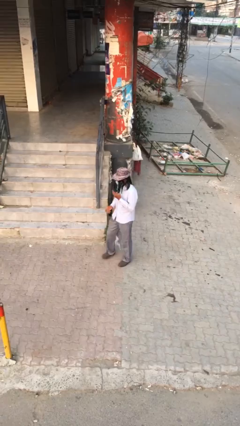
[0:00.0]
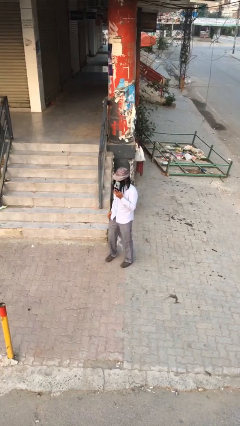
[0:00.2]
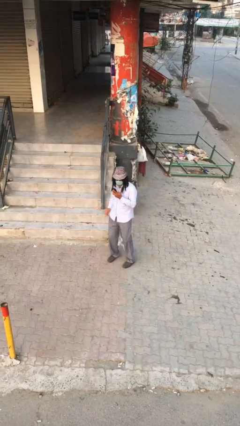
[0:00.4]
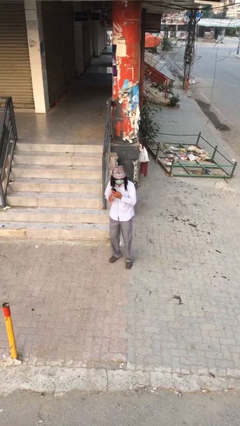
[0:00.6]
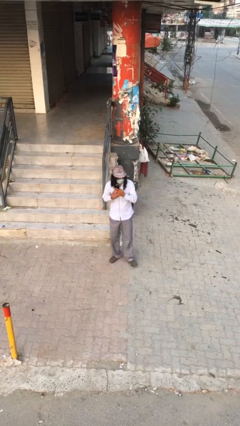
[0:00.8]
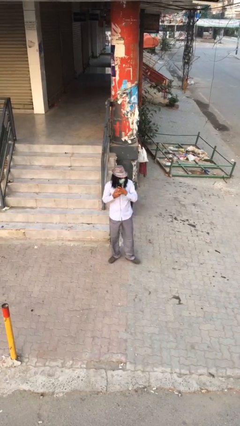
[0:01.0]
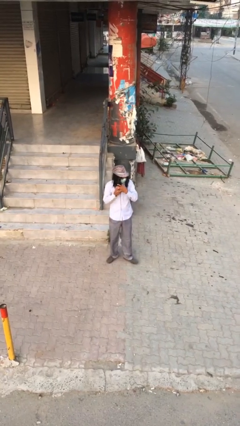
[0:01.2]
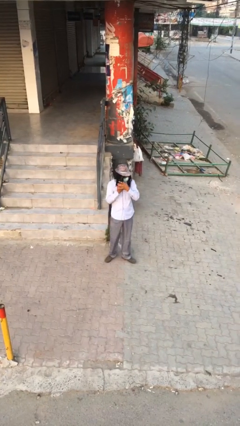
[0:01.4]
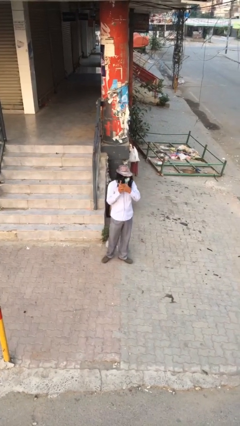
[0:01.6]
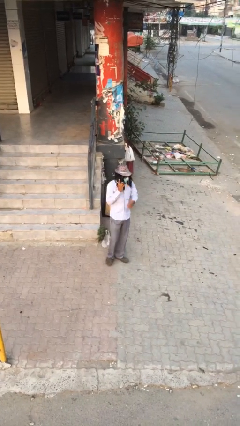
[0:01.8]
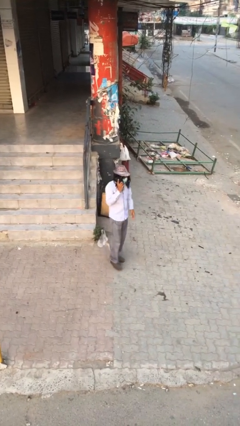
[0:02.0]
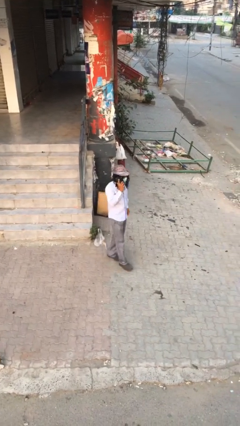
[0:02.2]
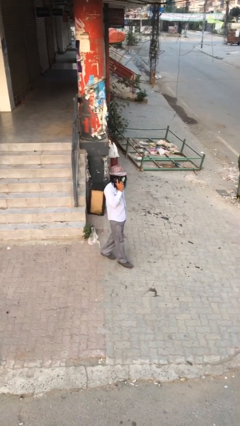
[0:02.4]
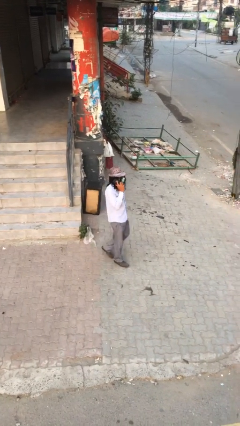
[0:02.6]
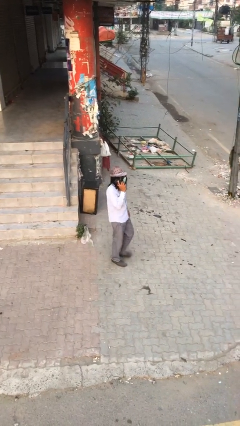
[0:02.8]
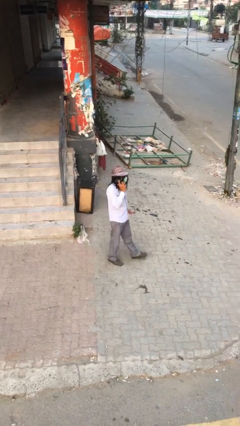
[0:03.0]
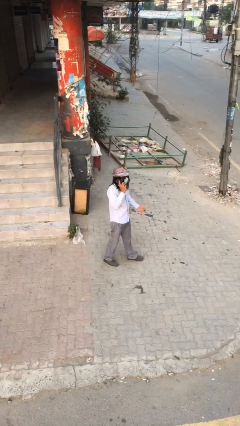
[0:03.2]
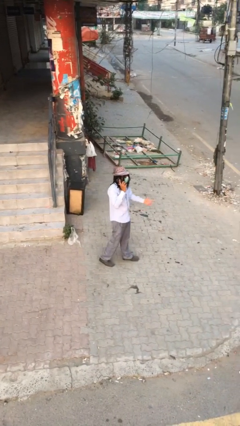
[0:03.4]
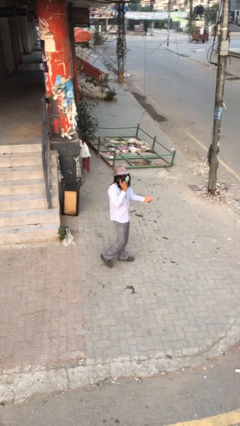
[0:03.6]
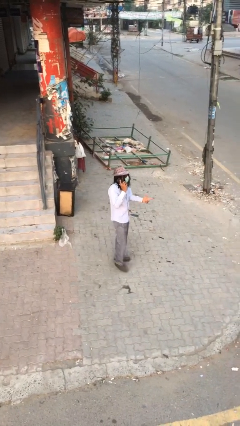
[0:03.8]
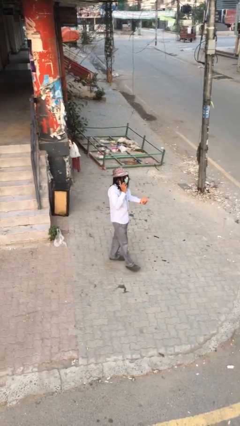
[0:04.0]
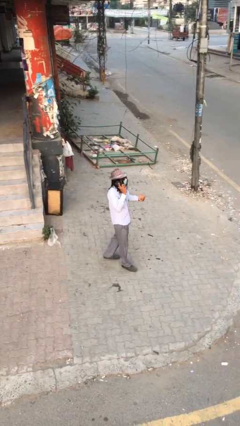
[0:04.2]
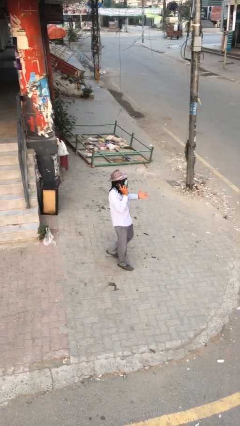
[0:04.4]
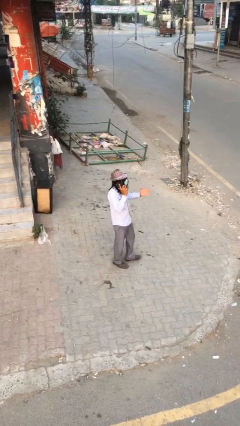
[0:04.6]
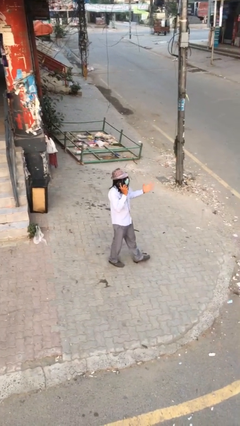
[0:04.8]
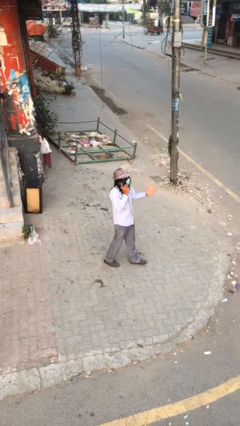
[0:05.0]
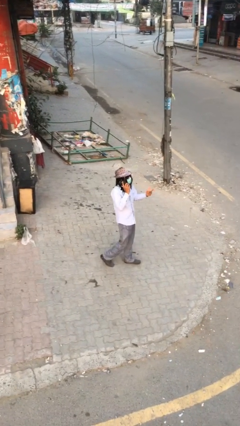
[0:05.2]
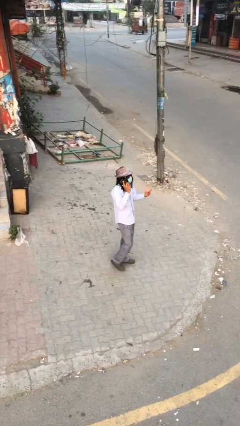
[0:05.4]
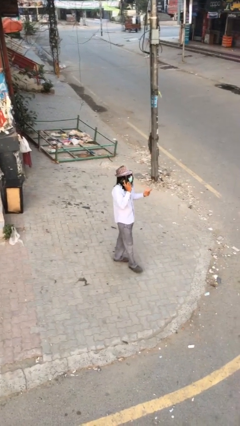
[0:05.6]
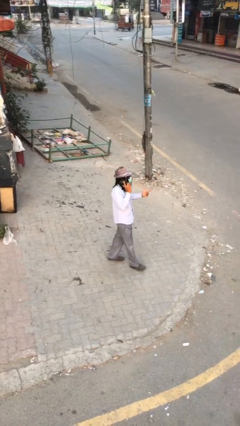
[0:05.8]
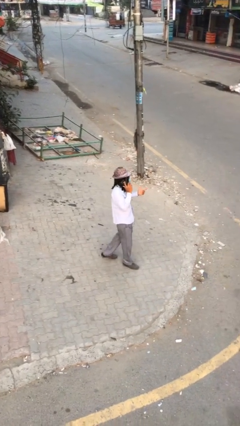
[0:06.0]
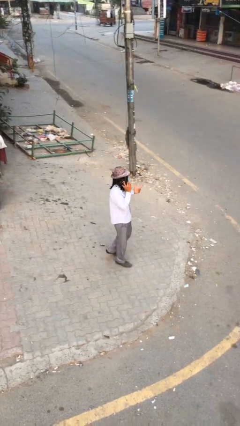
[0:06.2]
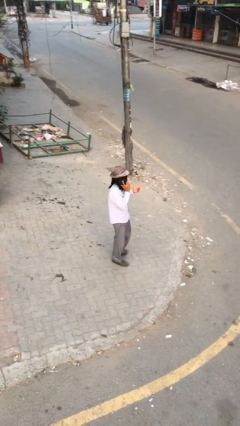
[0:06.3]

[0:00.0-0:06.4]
person talks on phone

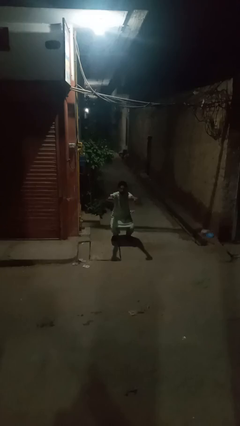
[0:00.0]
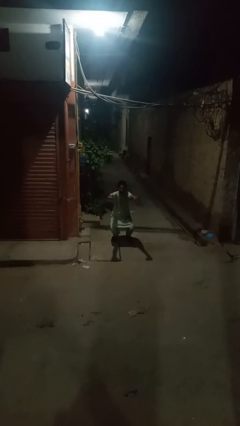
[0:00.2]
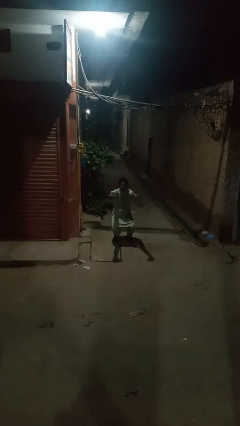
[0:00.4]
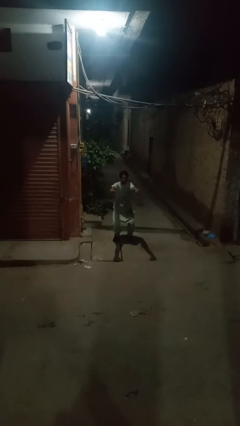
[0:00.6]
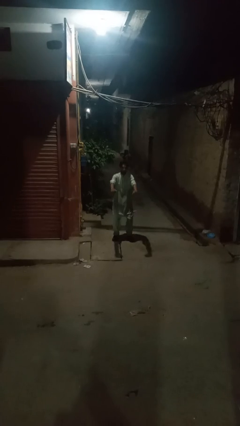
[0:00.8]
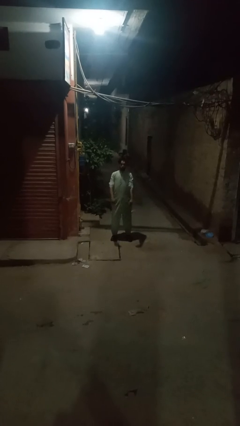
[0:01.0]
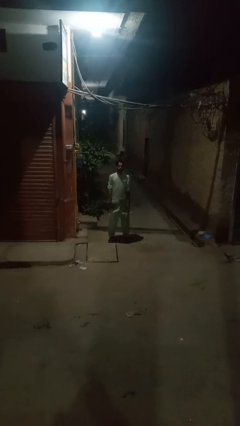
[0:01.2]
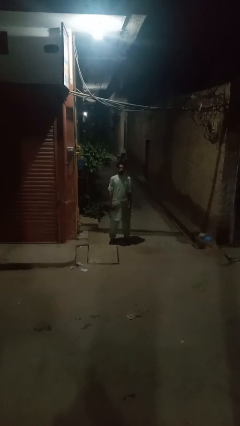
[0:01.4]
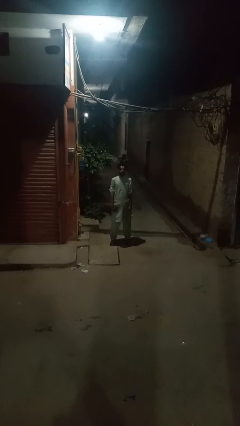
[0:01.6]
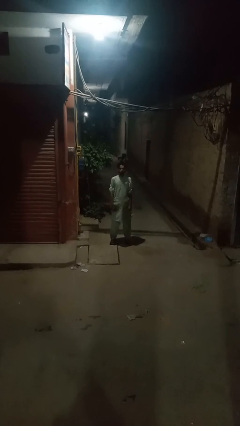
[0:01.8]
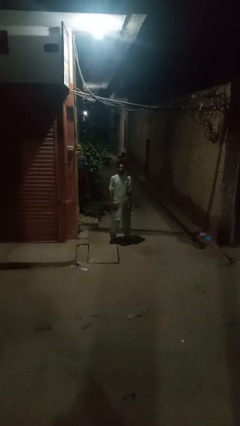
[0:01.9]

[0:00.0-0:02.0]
person stands up

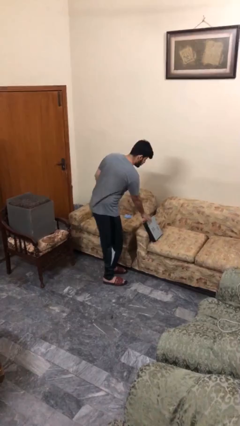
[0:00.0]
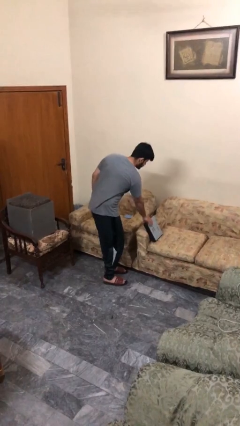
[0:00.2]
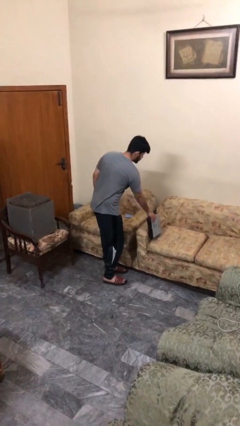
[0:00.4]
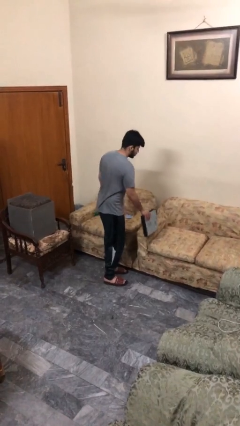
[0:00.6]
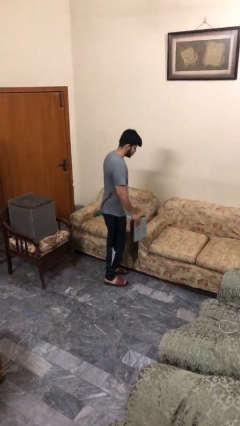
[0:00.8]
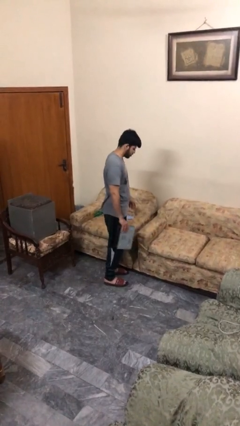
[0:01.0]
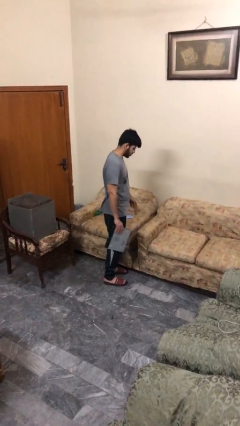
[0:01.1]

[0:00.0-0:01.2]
person picks up object from couch

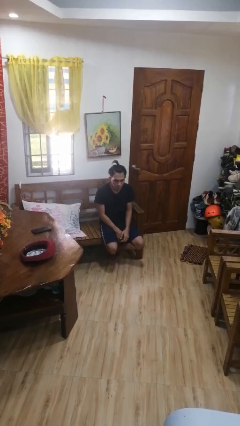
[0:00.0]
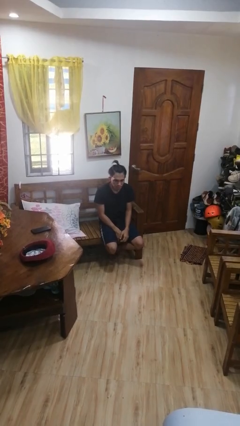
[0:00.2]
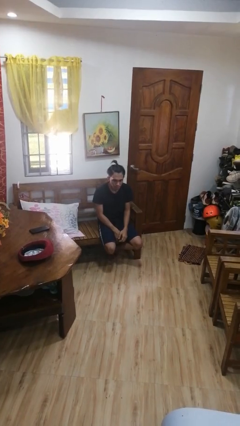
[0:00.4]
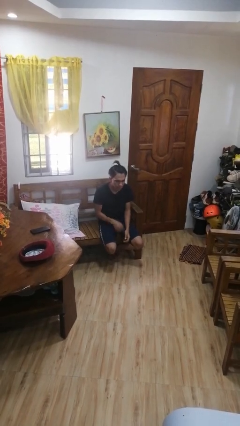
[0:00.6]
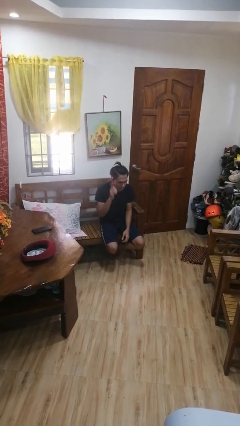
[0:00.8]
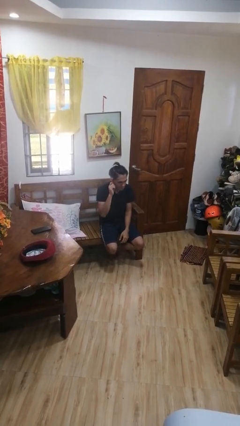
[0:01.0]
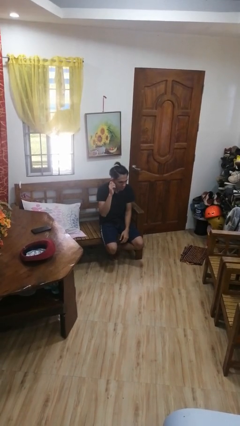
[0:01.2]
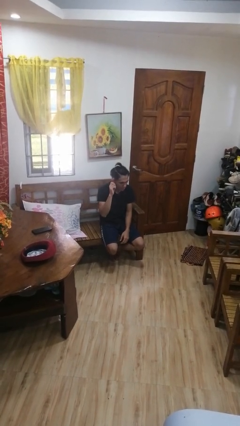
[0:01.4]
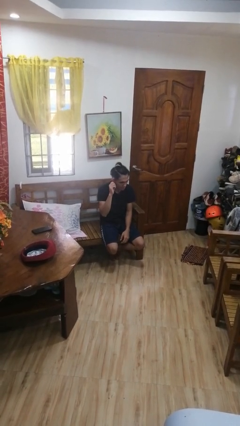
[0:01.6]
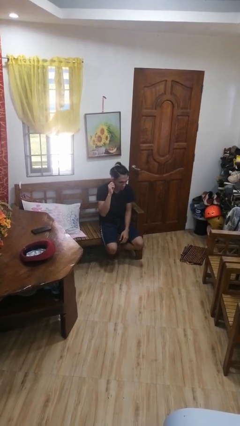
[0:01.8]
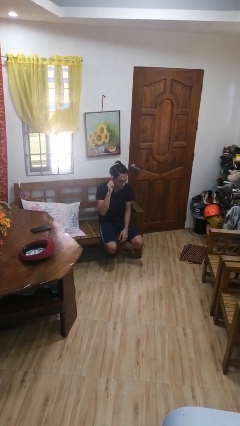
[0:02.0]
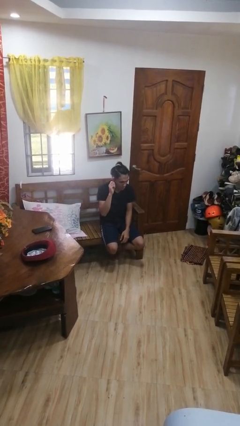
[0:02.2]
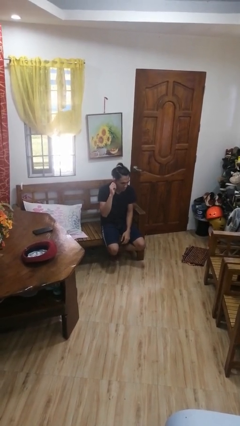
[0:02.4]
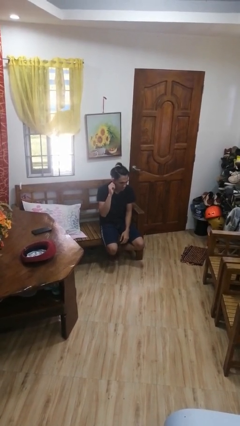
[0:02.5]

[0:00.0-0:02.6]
person touches earlobe

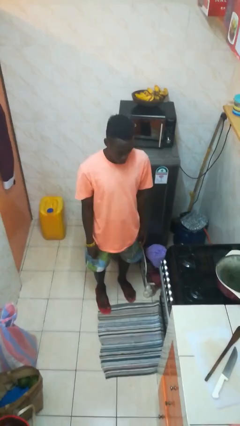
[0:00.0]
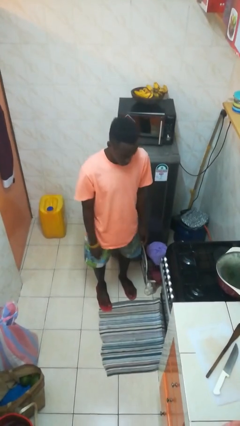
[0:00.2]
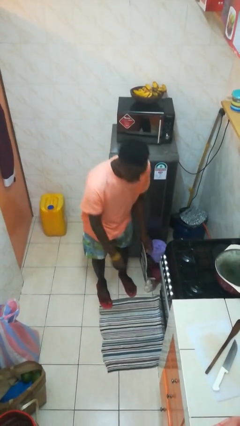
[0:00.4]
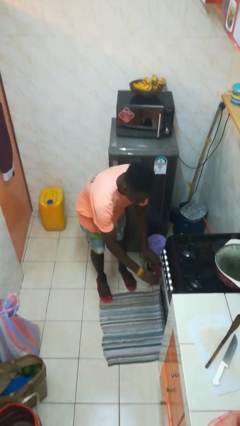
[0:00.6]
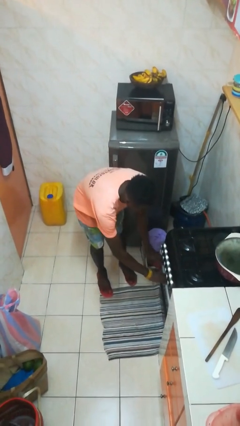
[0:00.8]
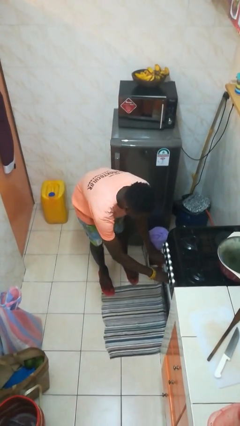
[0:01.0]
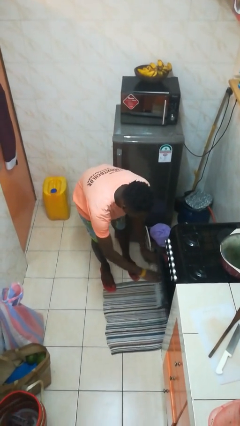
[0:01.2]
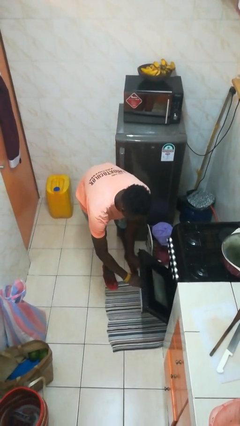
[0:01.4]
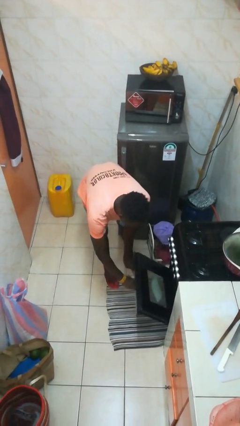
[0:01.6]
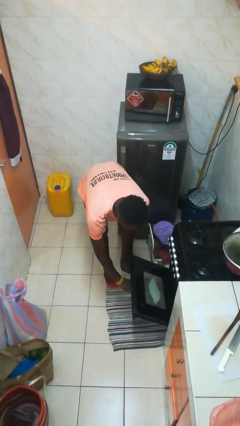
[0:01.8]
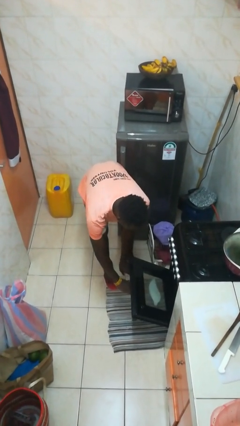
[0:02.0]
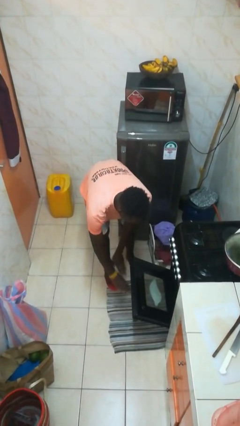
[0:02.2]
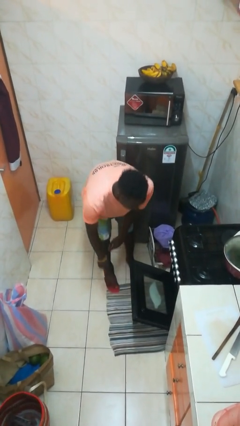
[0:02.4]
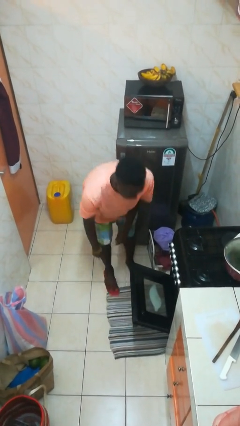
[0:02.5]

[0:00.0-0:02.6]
person opens oven door

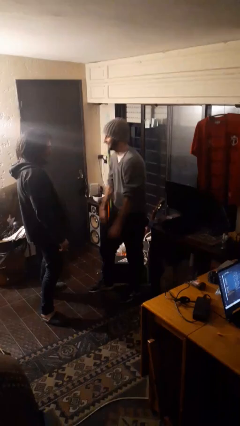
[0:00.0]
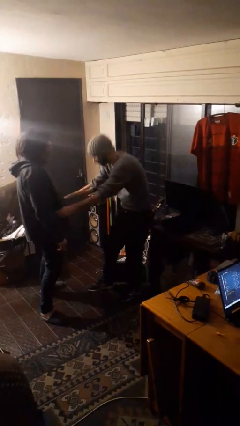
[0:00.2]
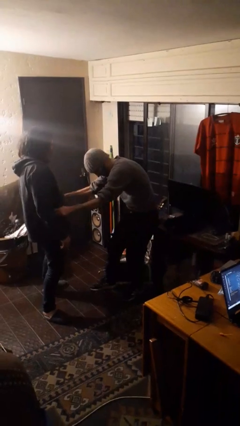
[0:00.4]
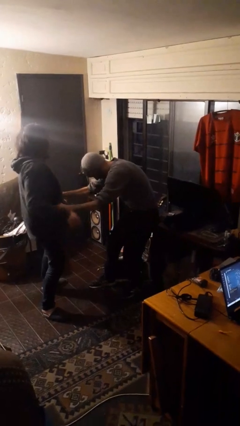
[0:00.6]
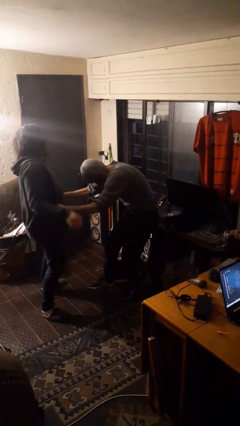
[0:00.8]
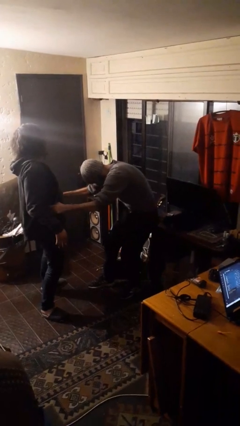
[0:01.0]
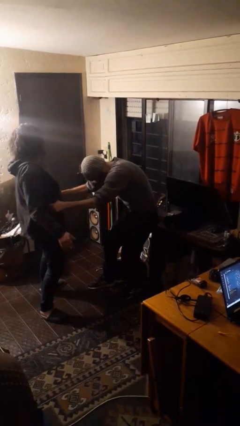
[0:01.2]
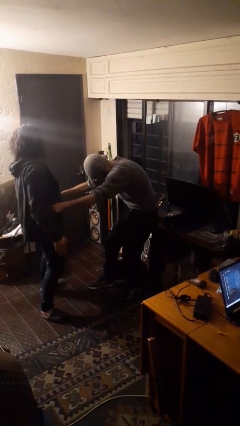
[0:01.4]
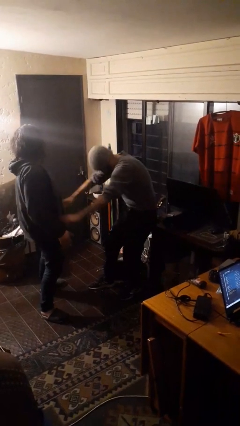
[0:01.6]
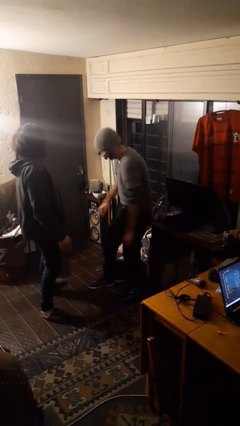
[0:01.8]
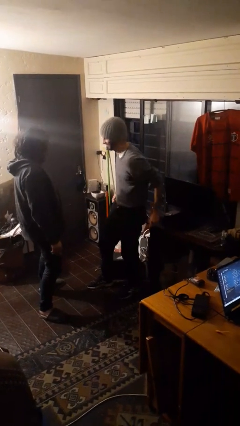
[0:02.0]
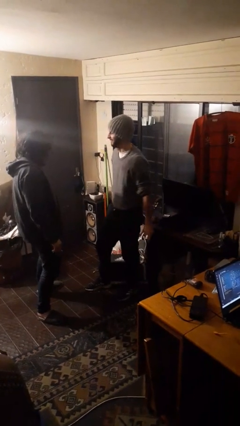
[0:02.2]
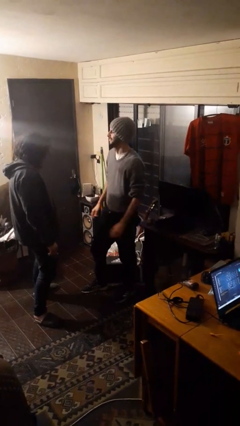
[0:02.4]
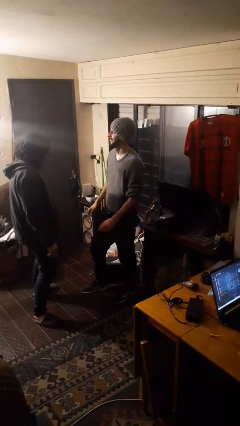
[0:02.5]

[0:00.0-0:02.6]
person tickles person
